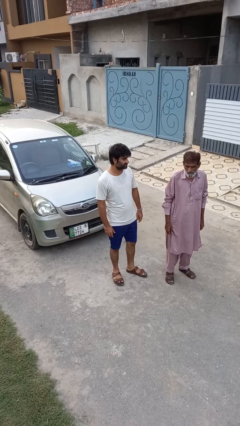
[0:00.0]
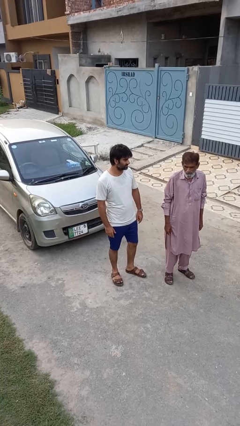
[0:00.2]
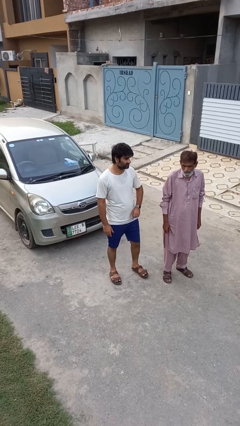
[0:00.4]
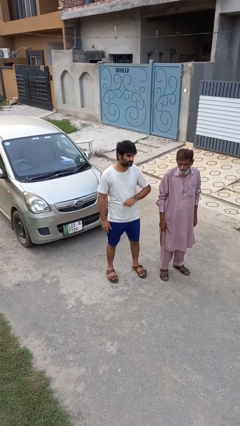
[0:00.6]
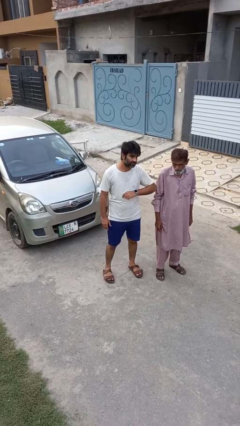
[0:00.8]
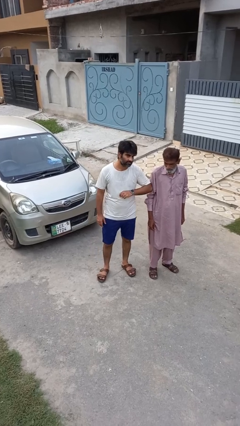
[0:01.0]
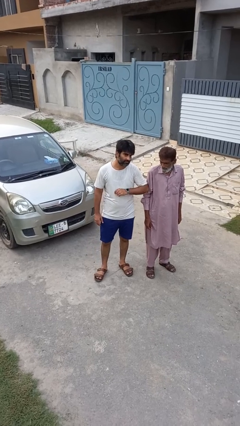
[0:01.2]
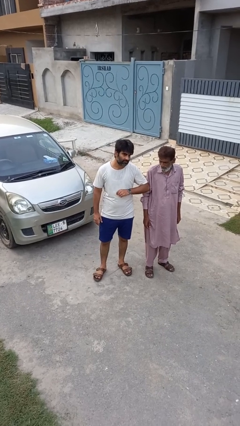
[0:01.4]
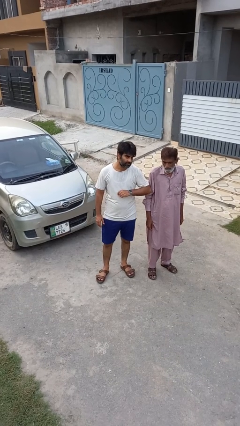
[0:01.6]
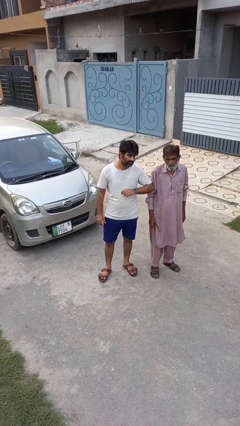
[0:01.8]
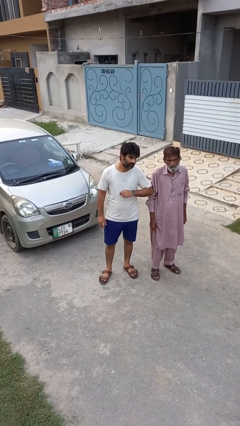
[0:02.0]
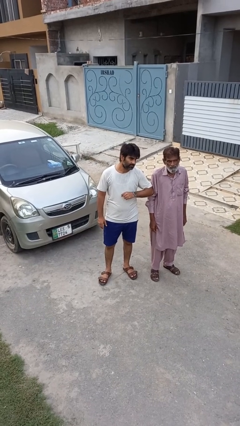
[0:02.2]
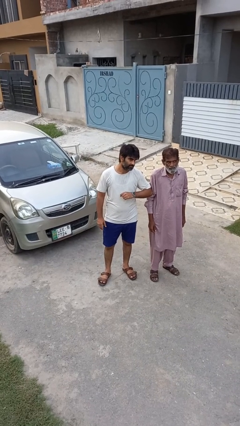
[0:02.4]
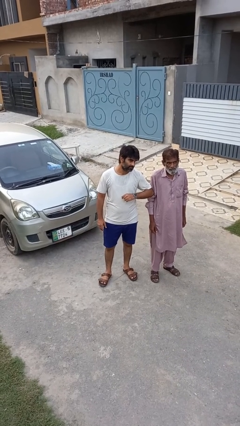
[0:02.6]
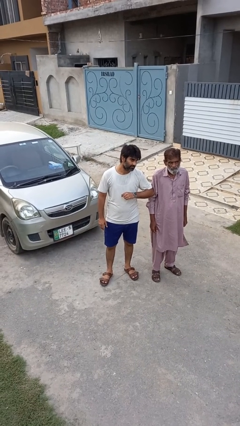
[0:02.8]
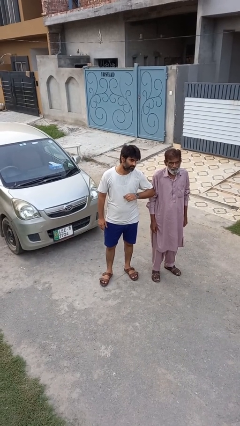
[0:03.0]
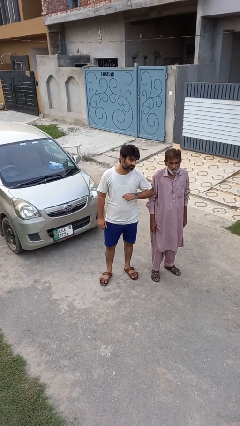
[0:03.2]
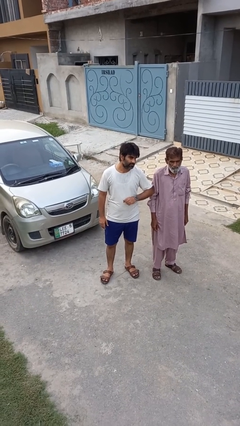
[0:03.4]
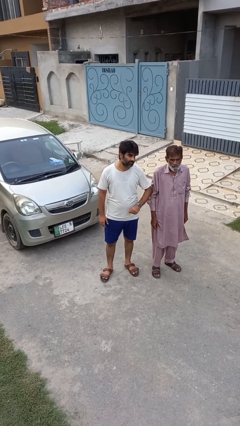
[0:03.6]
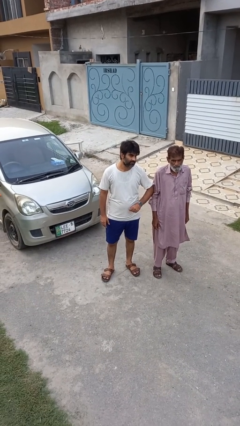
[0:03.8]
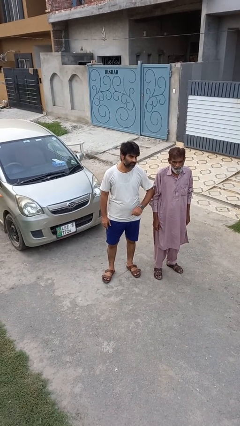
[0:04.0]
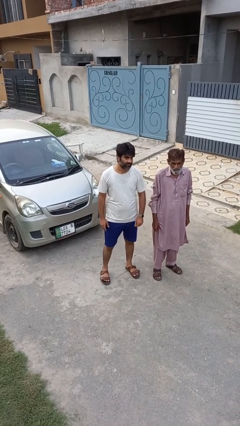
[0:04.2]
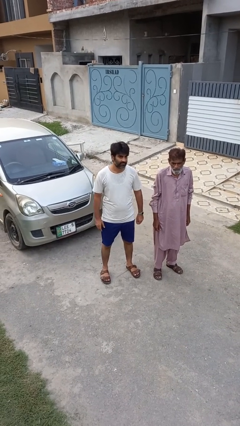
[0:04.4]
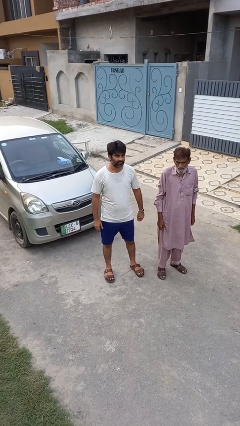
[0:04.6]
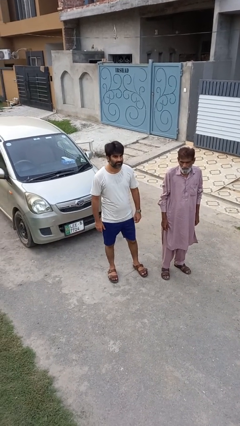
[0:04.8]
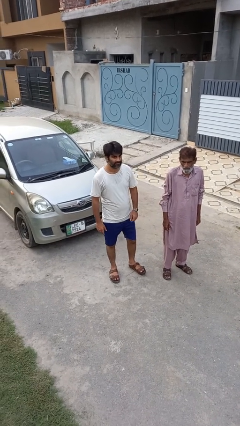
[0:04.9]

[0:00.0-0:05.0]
person nudges person with elbow

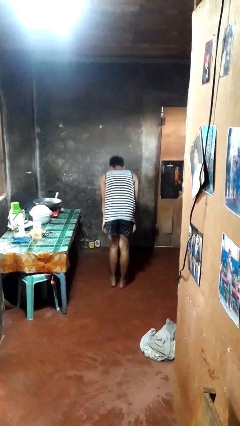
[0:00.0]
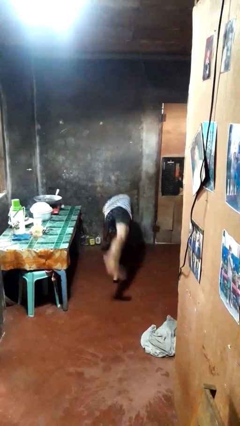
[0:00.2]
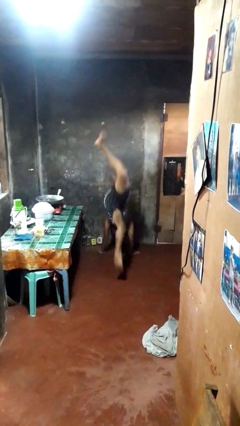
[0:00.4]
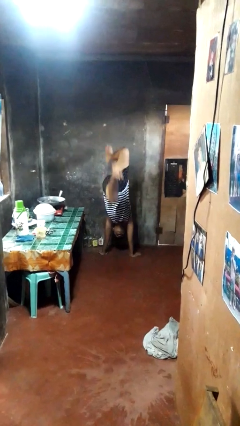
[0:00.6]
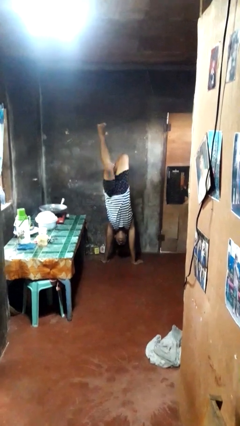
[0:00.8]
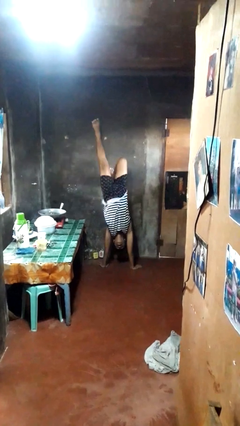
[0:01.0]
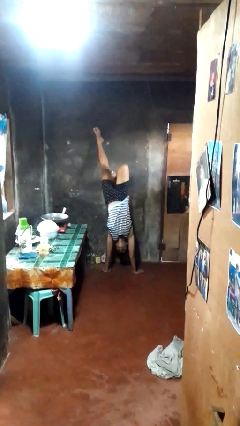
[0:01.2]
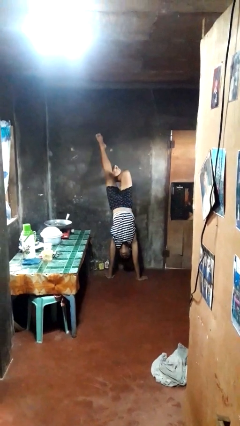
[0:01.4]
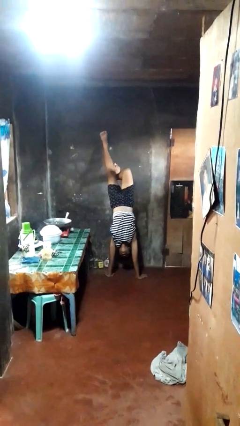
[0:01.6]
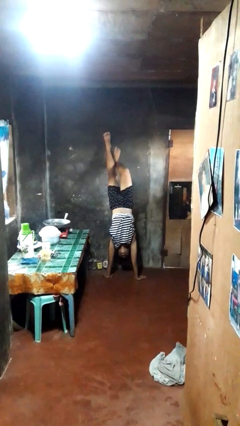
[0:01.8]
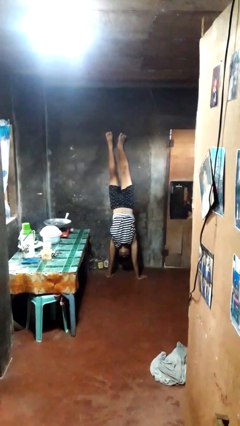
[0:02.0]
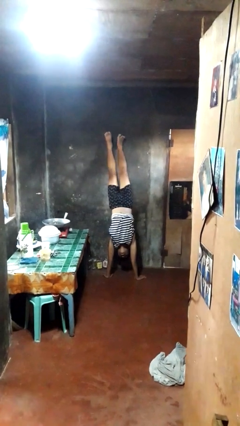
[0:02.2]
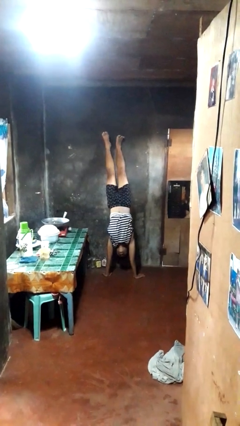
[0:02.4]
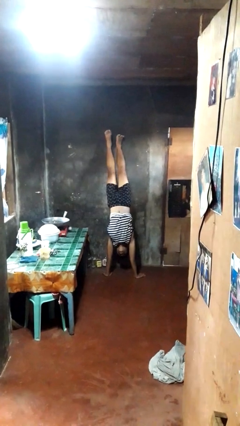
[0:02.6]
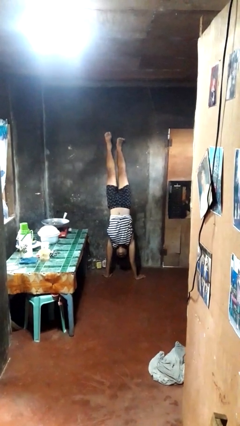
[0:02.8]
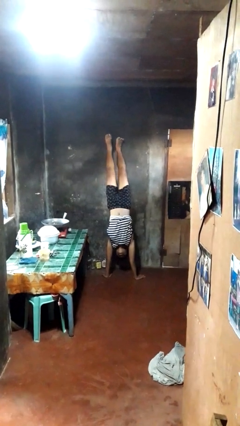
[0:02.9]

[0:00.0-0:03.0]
person handstand

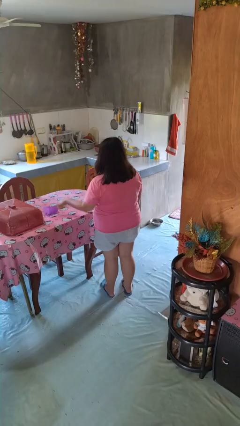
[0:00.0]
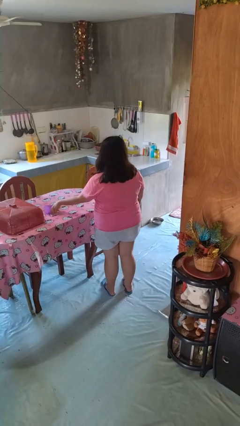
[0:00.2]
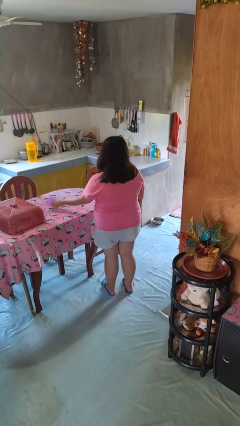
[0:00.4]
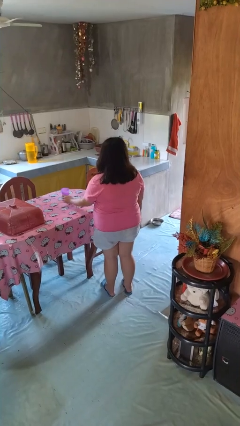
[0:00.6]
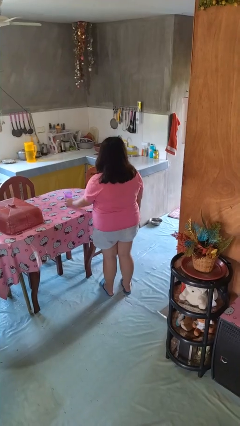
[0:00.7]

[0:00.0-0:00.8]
person sets upright glass

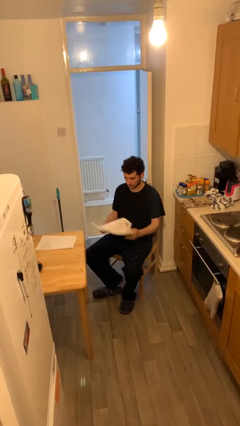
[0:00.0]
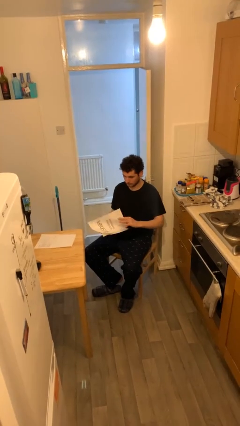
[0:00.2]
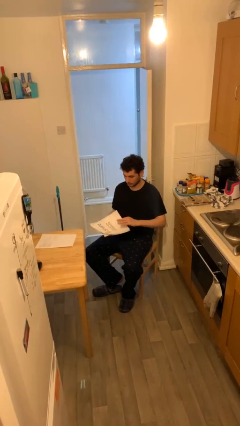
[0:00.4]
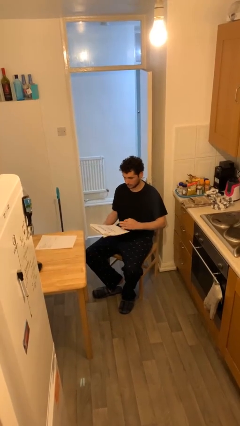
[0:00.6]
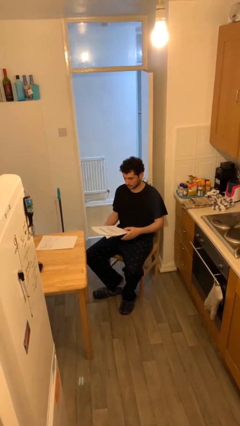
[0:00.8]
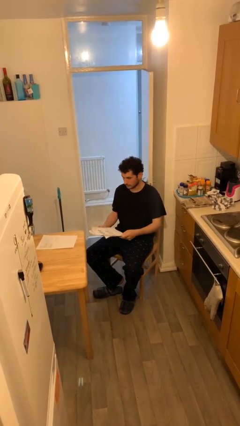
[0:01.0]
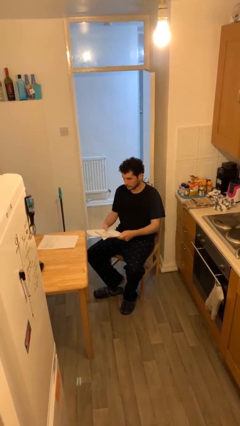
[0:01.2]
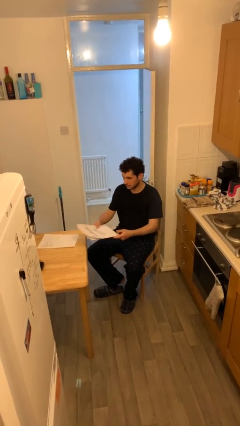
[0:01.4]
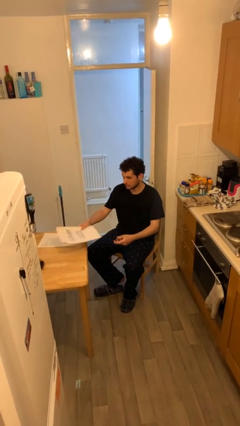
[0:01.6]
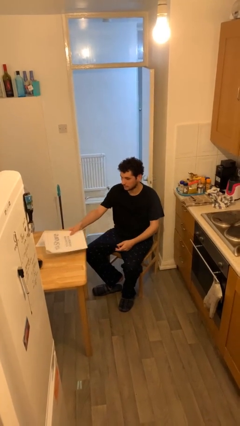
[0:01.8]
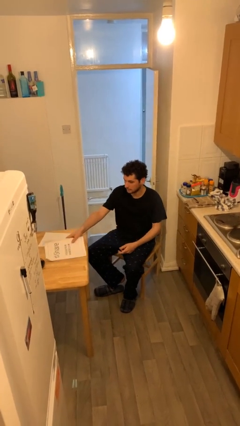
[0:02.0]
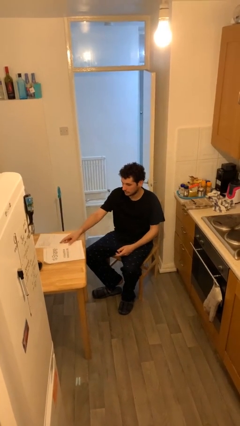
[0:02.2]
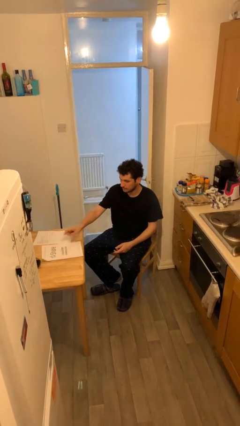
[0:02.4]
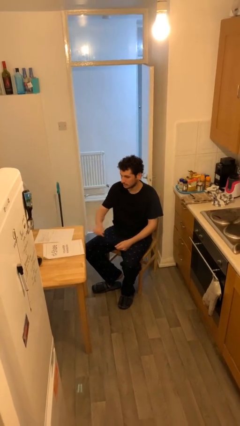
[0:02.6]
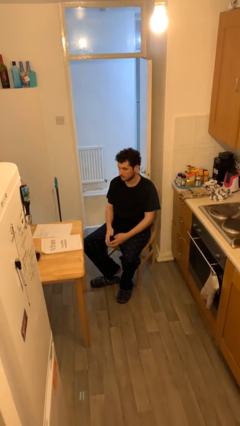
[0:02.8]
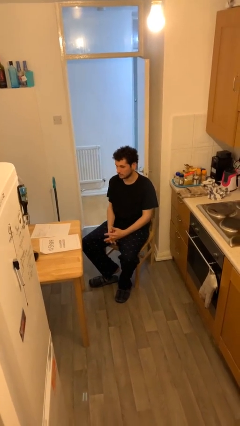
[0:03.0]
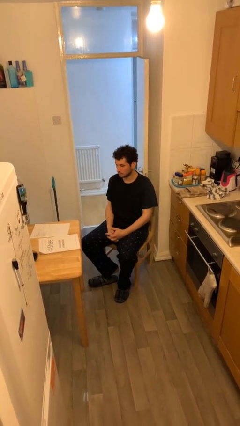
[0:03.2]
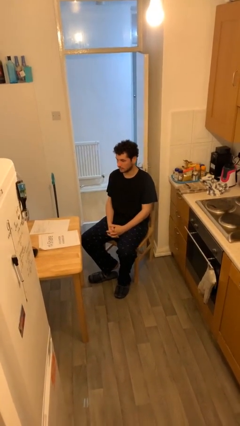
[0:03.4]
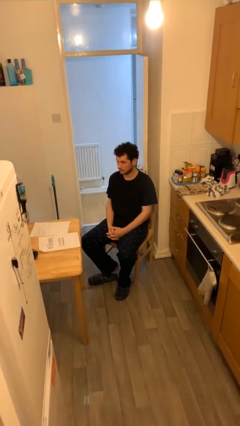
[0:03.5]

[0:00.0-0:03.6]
person puts down object on table

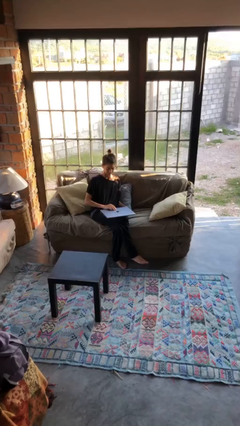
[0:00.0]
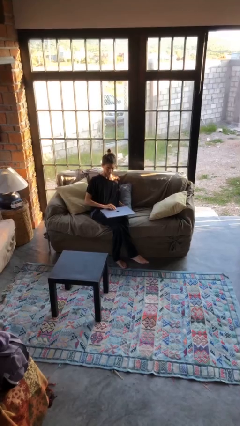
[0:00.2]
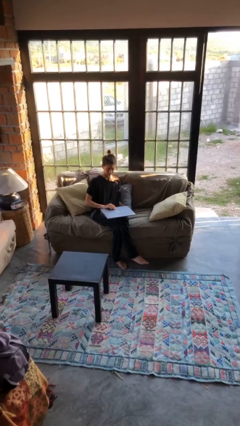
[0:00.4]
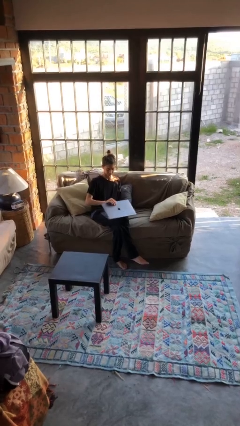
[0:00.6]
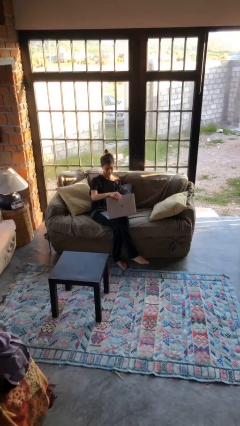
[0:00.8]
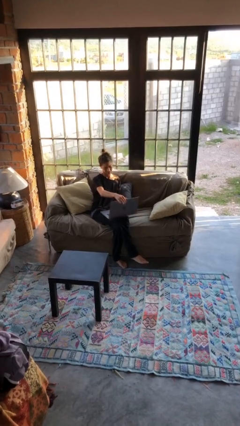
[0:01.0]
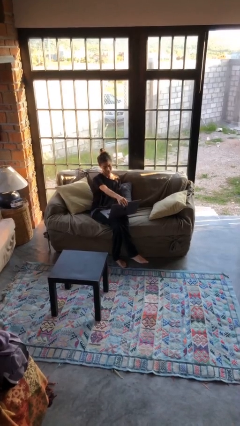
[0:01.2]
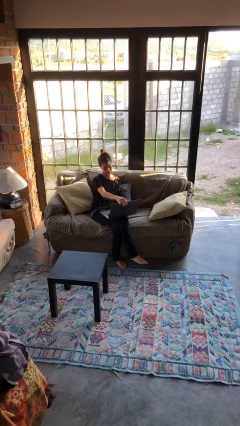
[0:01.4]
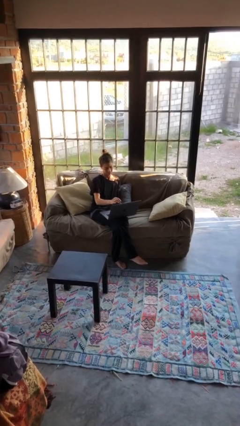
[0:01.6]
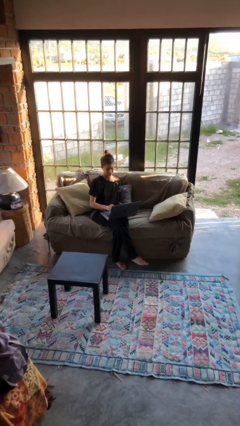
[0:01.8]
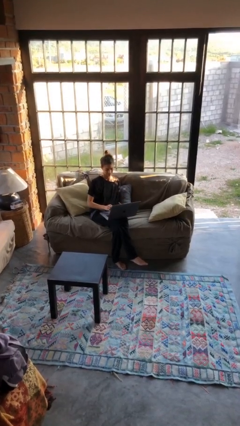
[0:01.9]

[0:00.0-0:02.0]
person opens laptop

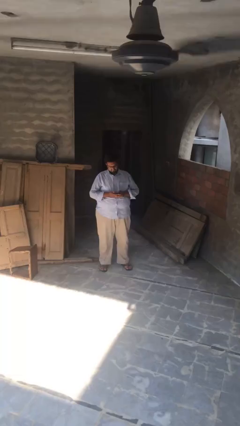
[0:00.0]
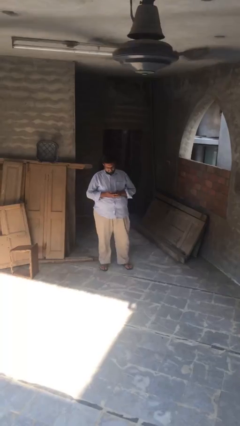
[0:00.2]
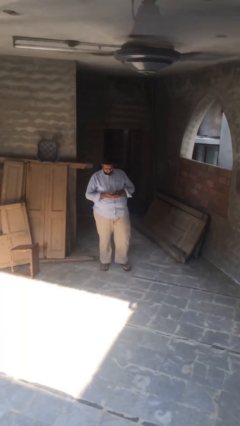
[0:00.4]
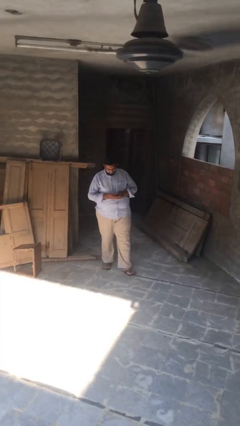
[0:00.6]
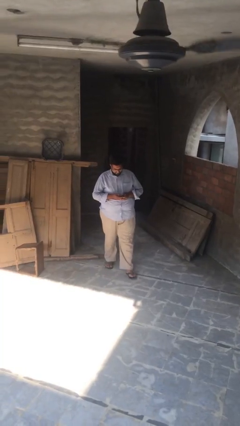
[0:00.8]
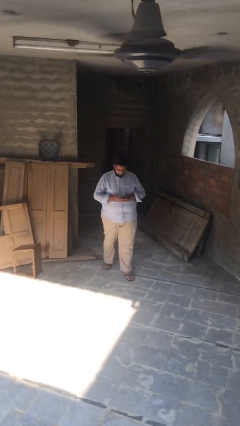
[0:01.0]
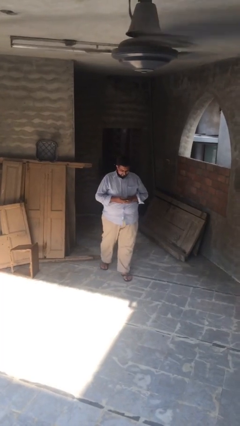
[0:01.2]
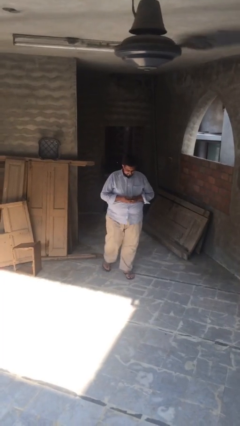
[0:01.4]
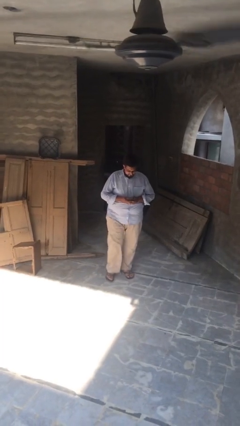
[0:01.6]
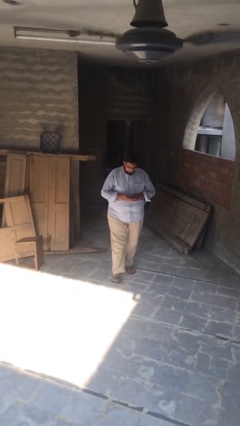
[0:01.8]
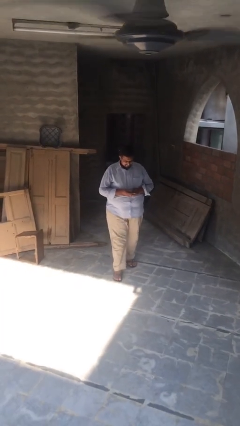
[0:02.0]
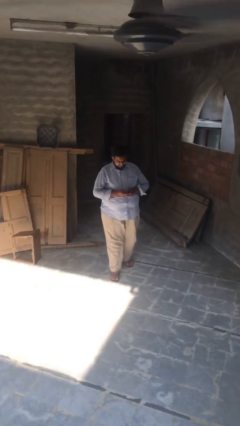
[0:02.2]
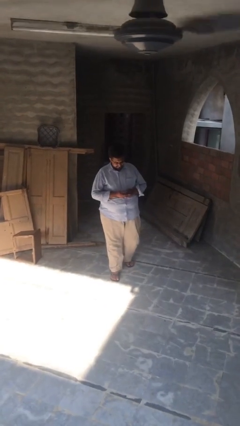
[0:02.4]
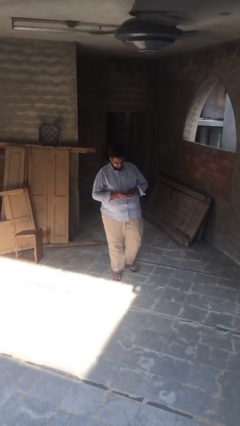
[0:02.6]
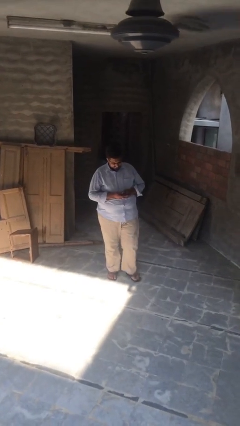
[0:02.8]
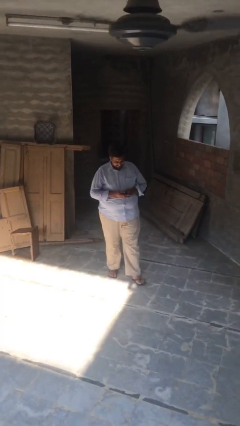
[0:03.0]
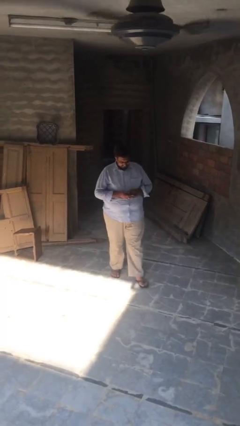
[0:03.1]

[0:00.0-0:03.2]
person texts on phone
